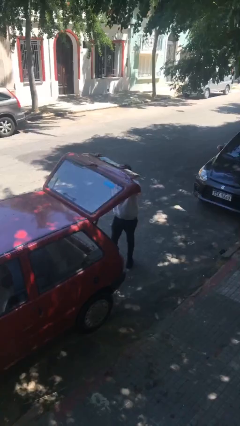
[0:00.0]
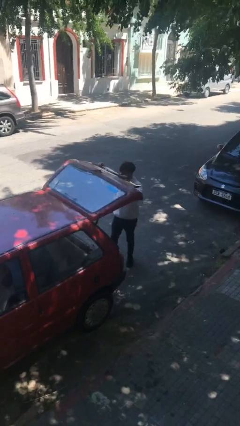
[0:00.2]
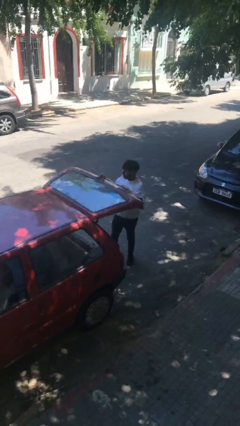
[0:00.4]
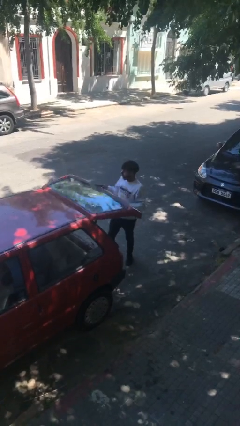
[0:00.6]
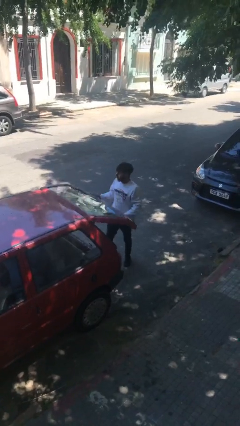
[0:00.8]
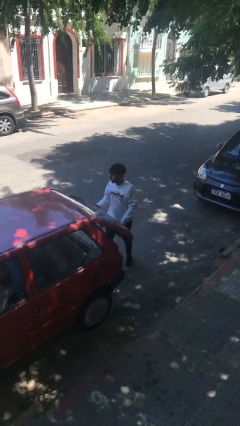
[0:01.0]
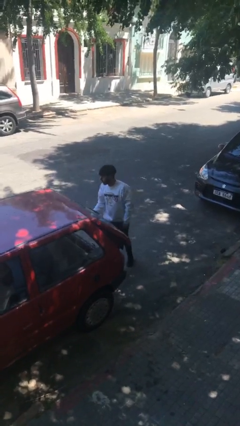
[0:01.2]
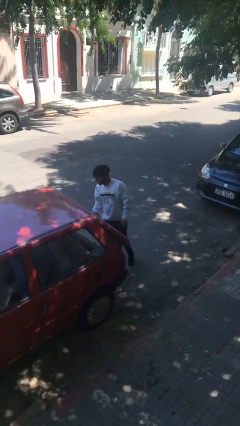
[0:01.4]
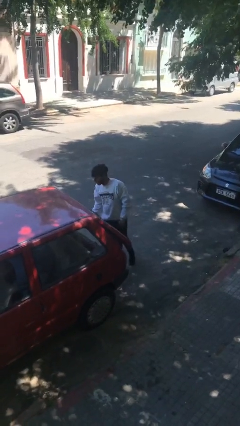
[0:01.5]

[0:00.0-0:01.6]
person closes car trunk

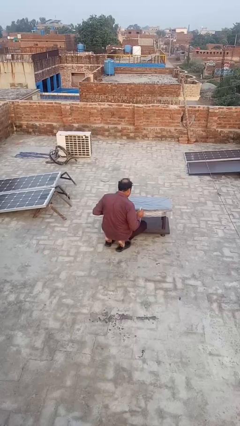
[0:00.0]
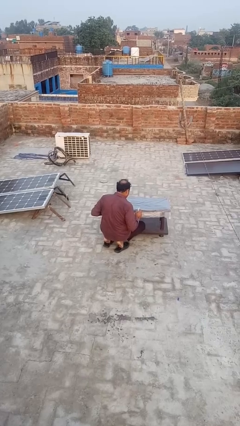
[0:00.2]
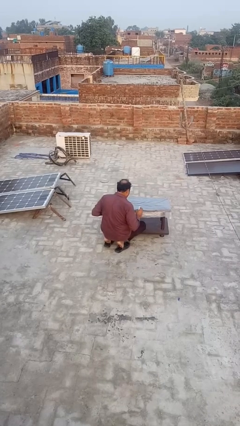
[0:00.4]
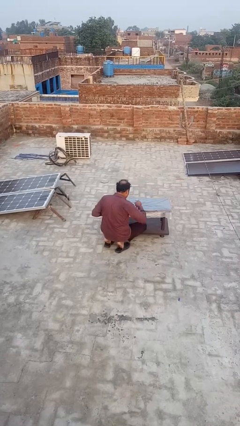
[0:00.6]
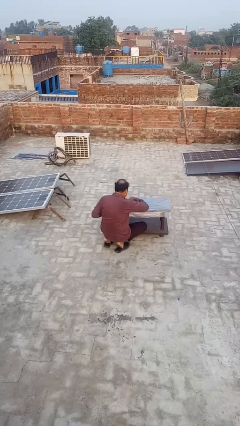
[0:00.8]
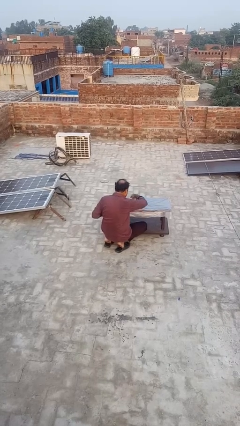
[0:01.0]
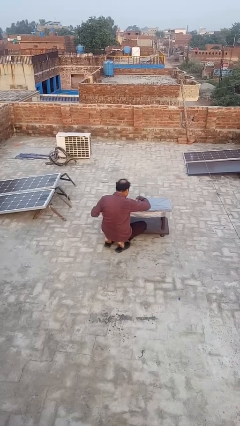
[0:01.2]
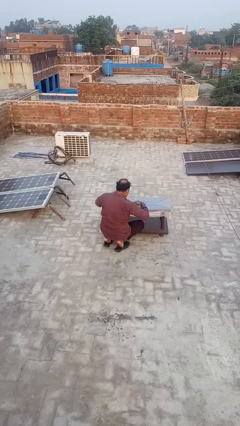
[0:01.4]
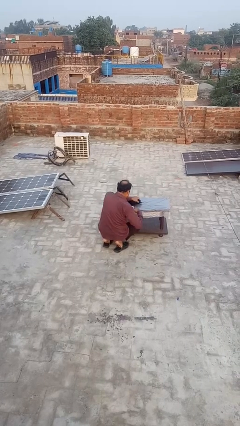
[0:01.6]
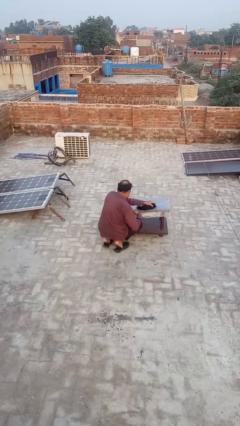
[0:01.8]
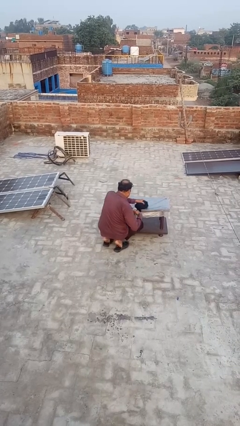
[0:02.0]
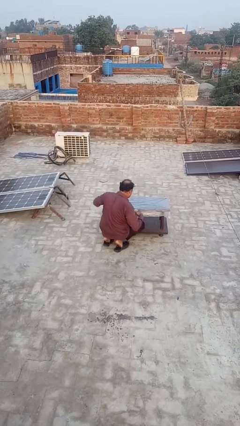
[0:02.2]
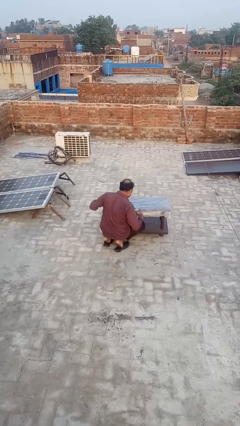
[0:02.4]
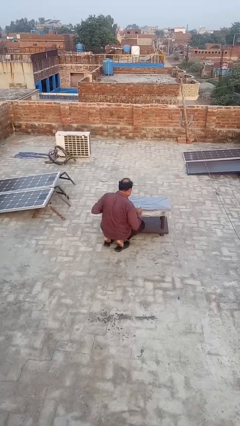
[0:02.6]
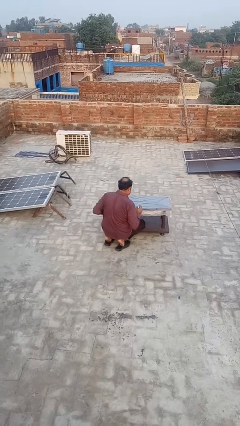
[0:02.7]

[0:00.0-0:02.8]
person sprays from bottle

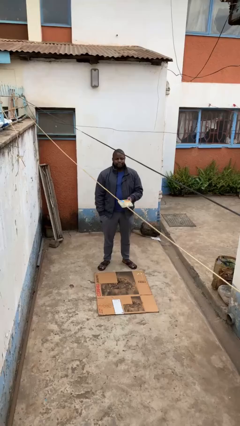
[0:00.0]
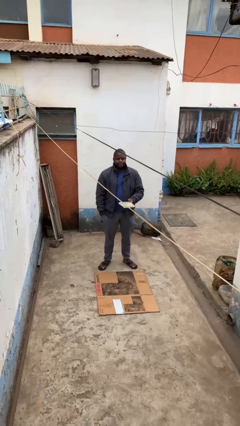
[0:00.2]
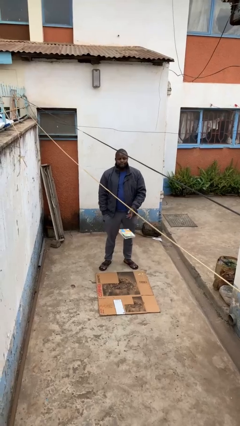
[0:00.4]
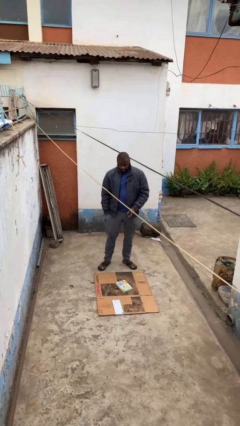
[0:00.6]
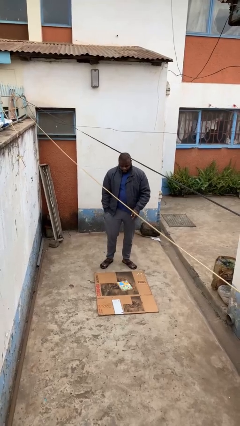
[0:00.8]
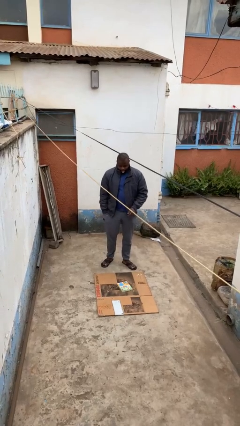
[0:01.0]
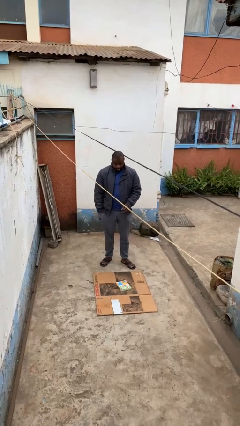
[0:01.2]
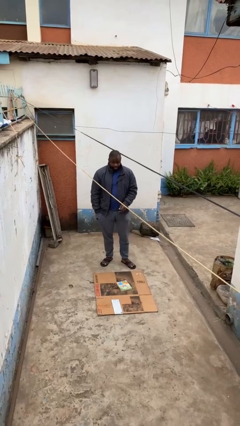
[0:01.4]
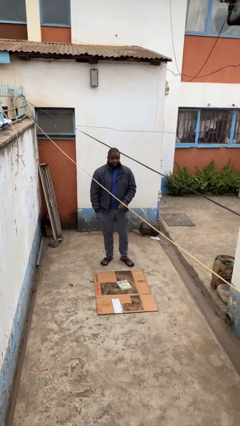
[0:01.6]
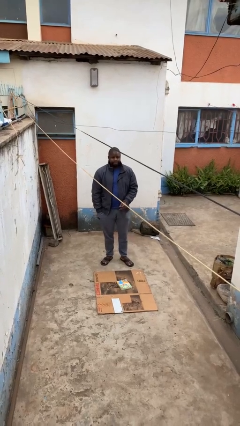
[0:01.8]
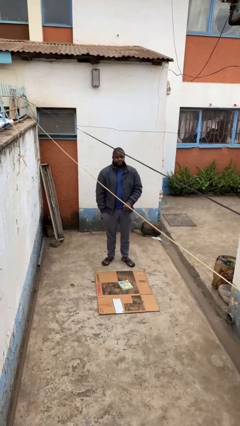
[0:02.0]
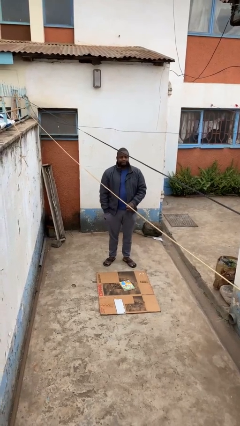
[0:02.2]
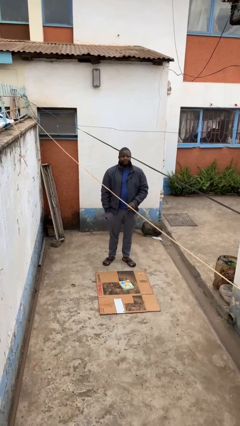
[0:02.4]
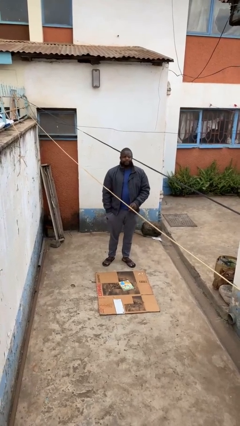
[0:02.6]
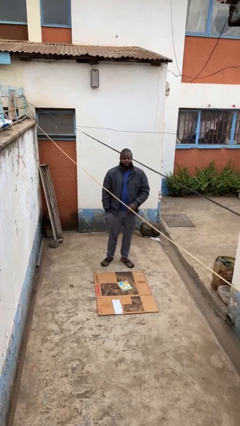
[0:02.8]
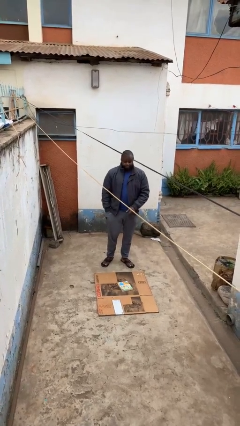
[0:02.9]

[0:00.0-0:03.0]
person drops object

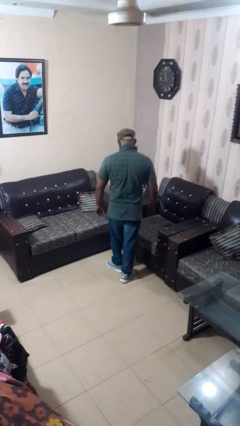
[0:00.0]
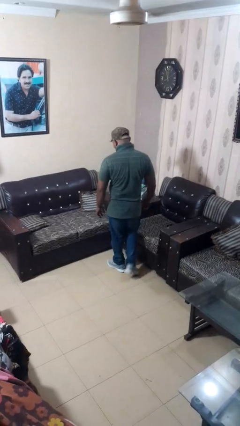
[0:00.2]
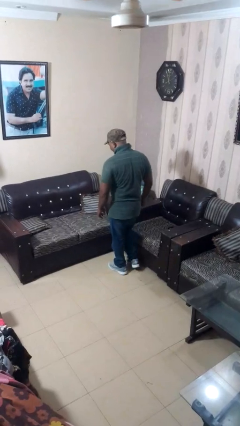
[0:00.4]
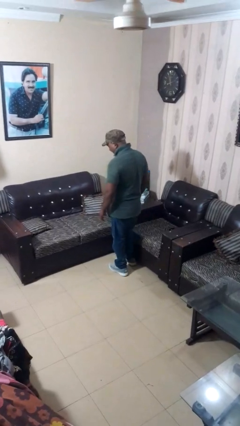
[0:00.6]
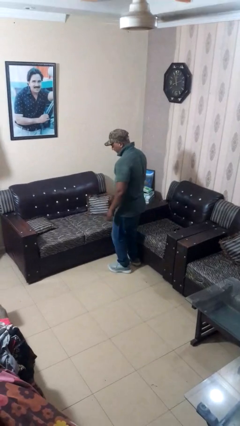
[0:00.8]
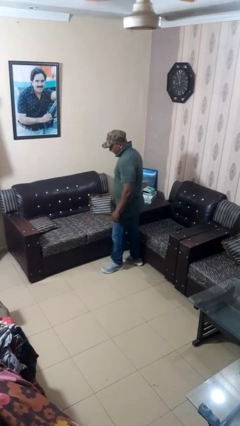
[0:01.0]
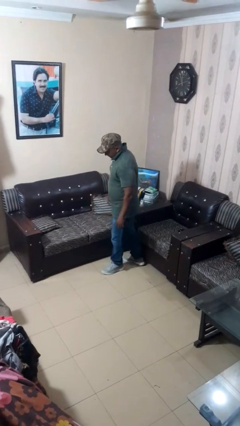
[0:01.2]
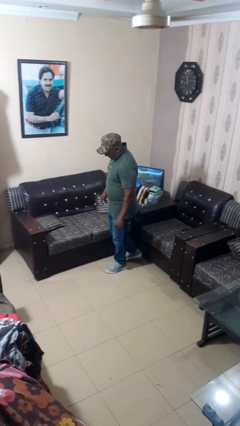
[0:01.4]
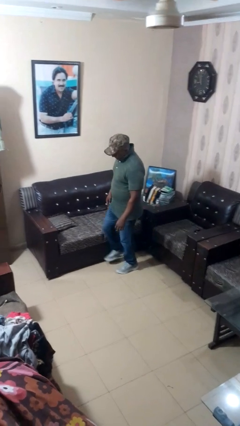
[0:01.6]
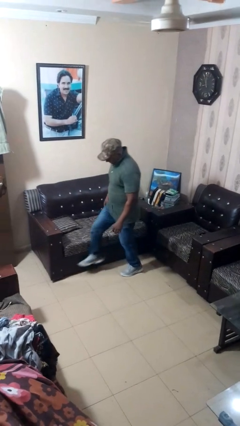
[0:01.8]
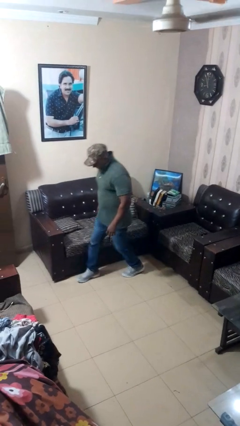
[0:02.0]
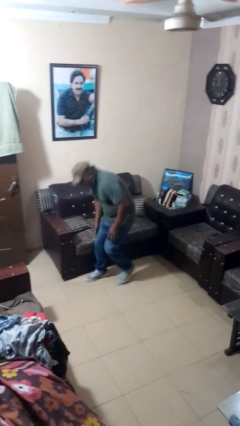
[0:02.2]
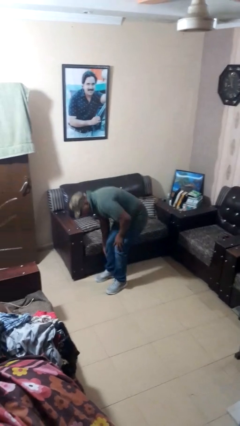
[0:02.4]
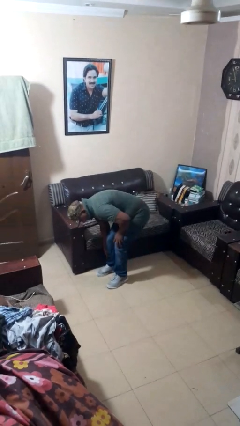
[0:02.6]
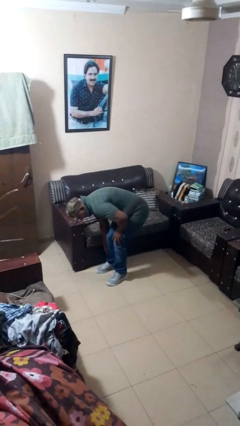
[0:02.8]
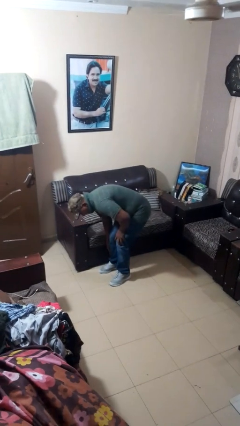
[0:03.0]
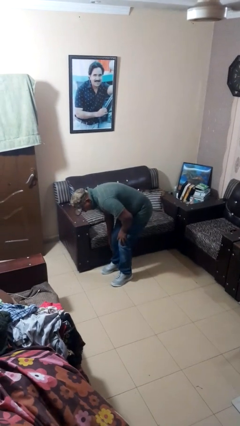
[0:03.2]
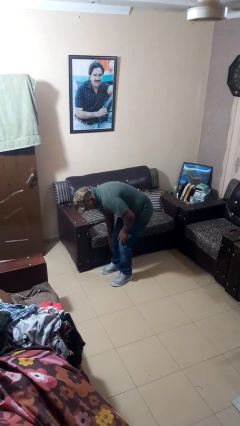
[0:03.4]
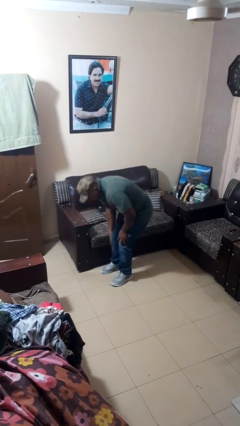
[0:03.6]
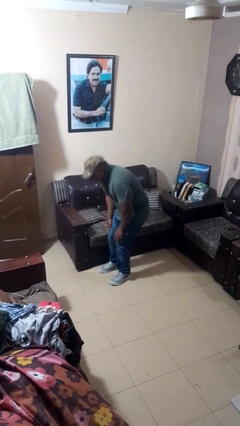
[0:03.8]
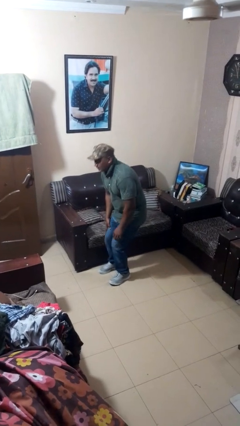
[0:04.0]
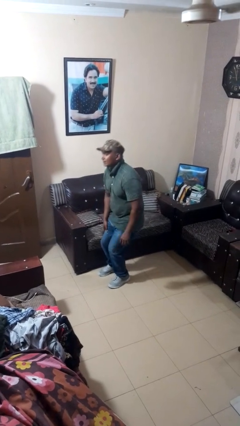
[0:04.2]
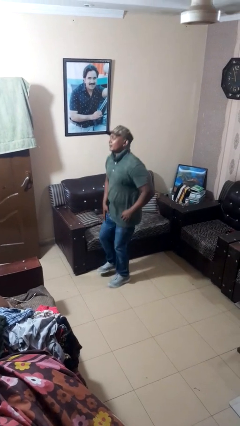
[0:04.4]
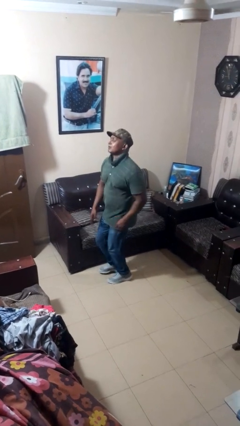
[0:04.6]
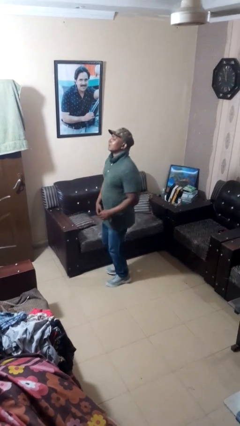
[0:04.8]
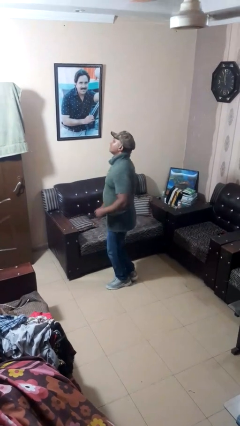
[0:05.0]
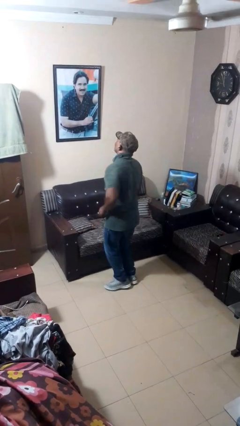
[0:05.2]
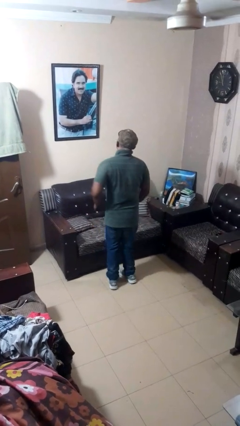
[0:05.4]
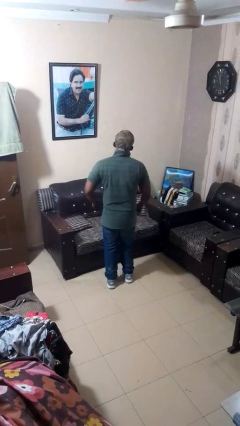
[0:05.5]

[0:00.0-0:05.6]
person stubs toe

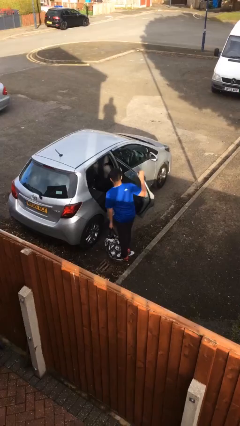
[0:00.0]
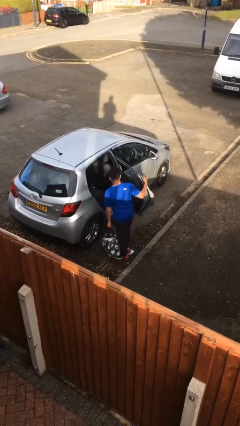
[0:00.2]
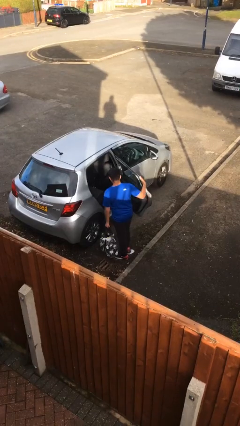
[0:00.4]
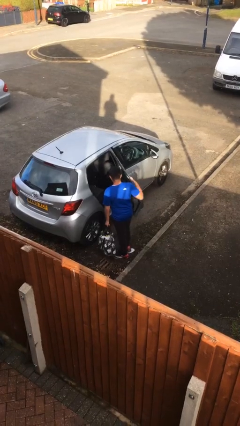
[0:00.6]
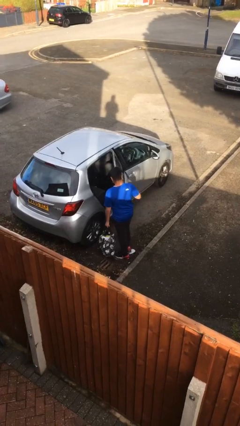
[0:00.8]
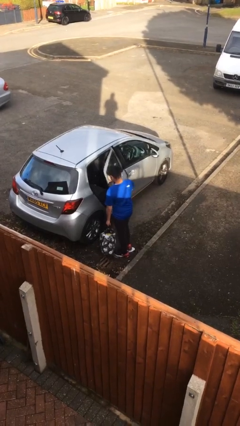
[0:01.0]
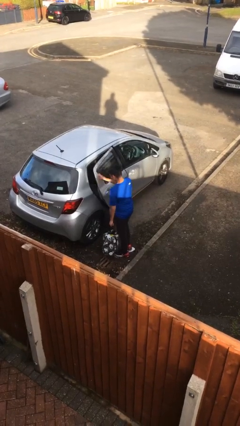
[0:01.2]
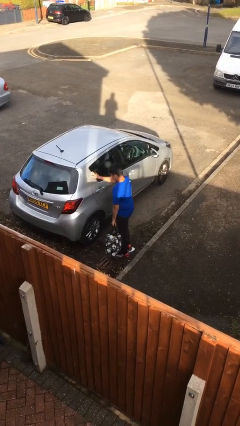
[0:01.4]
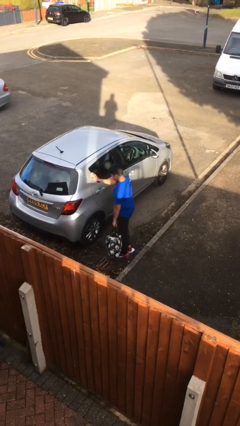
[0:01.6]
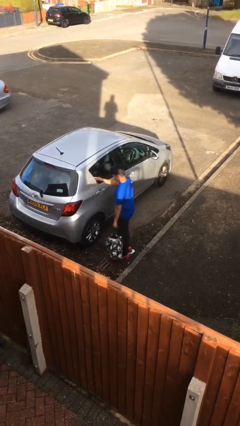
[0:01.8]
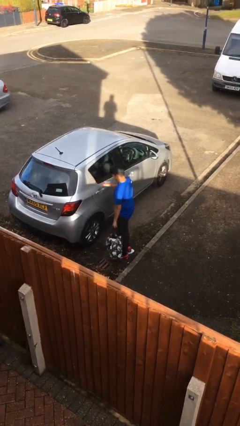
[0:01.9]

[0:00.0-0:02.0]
person closes car door

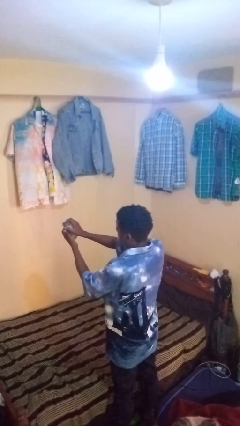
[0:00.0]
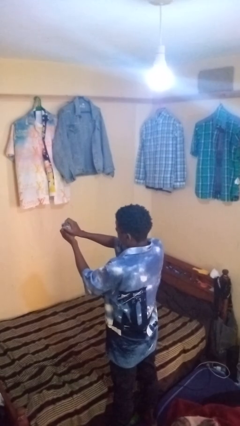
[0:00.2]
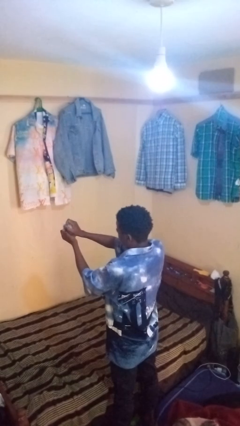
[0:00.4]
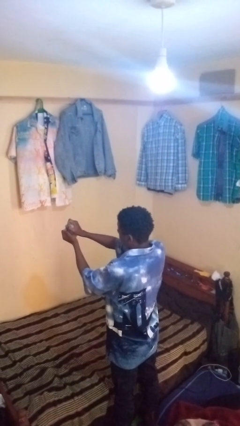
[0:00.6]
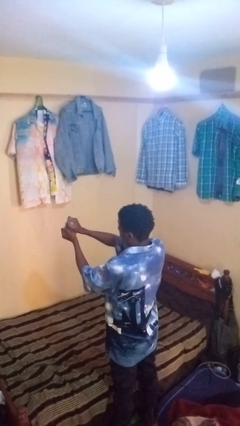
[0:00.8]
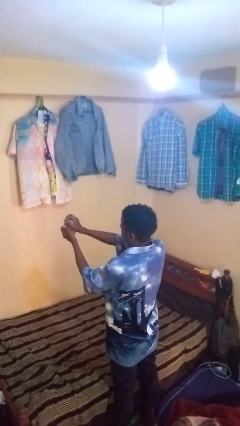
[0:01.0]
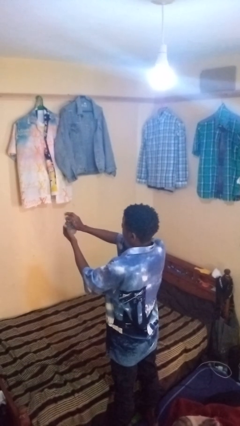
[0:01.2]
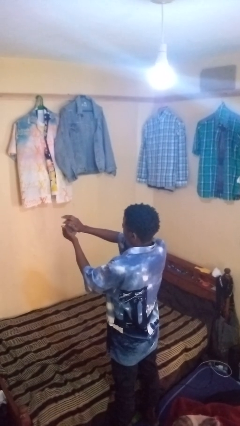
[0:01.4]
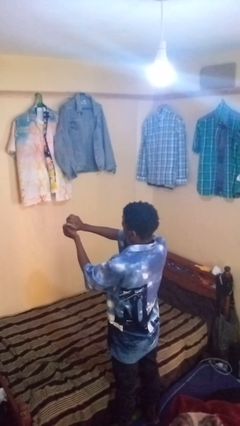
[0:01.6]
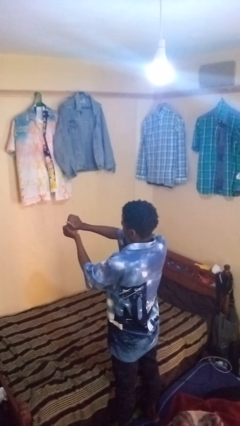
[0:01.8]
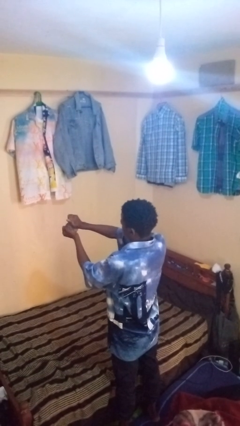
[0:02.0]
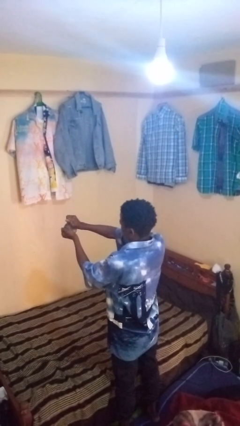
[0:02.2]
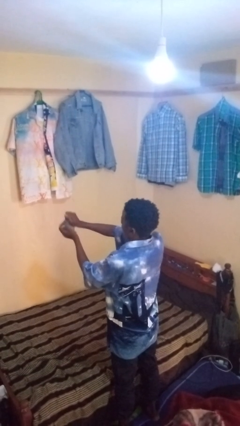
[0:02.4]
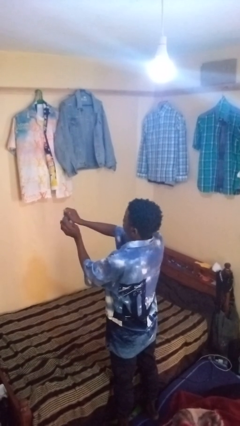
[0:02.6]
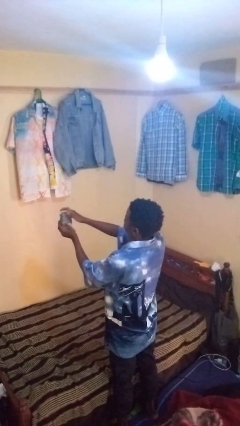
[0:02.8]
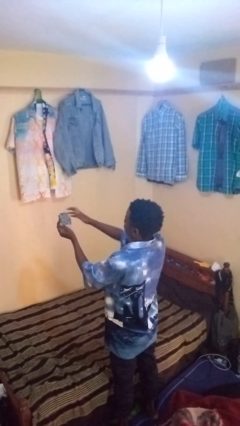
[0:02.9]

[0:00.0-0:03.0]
person squeezes object
